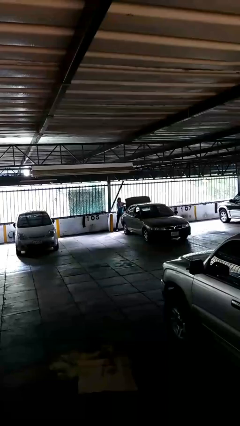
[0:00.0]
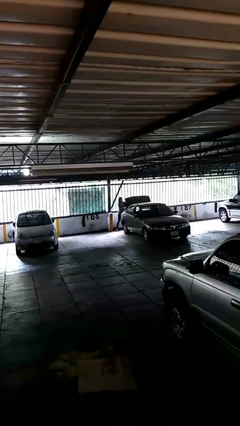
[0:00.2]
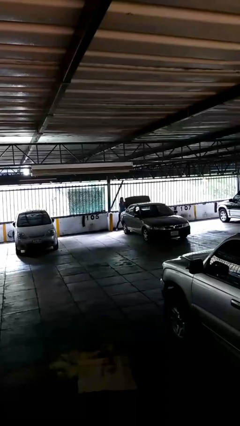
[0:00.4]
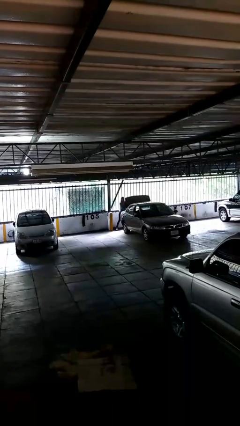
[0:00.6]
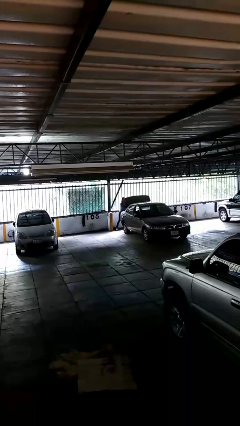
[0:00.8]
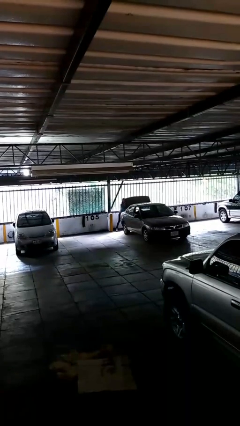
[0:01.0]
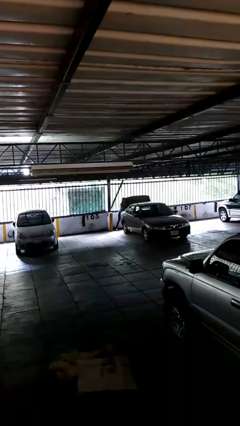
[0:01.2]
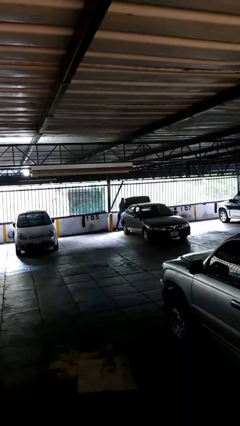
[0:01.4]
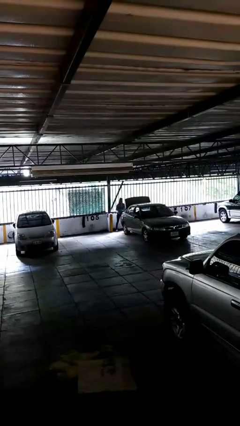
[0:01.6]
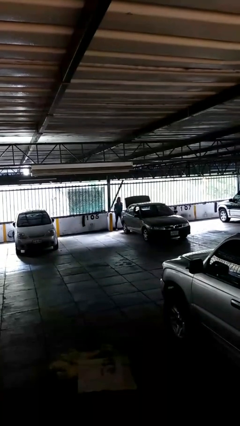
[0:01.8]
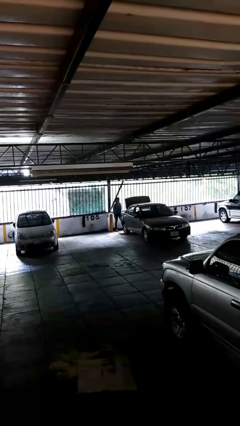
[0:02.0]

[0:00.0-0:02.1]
person loads car

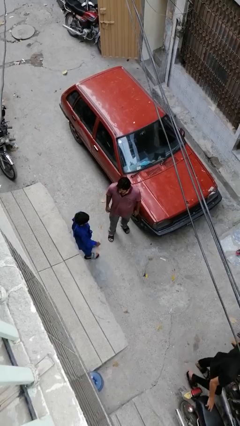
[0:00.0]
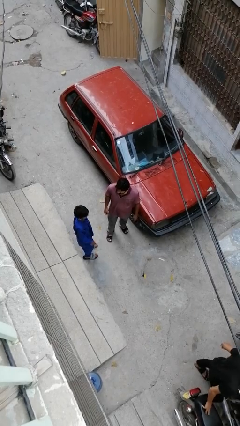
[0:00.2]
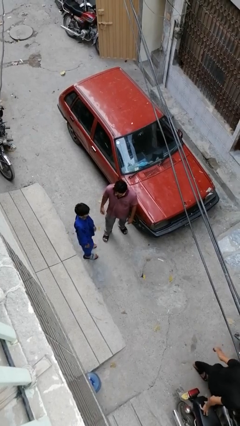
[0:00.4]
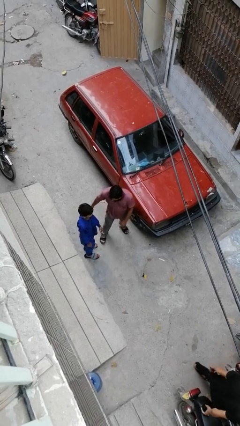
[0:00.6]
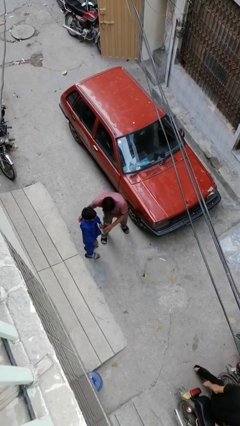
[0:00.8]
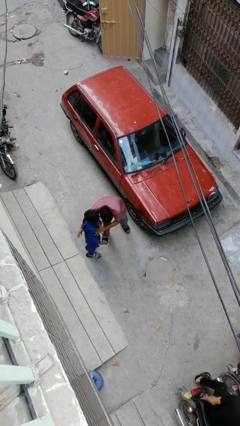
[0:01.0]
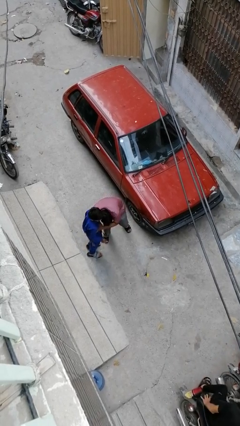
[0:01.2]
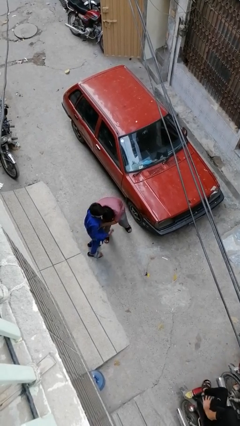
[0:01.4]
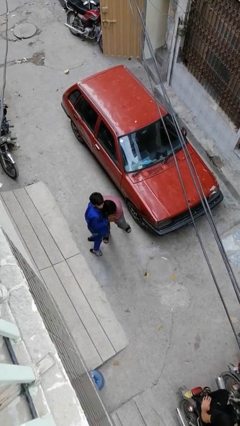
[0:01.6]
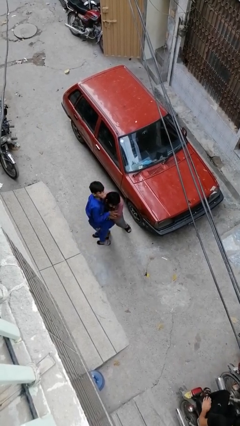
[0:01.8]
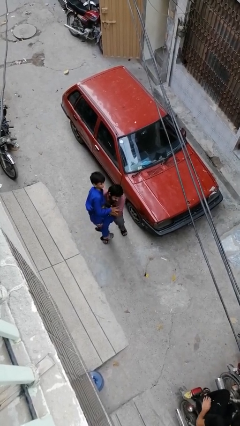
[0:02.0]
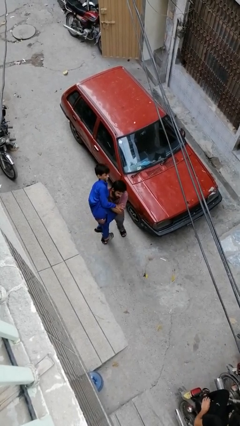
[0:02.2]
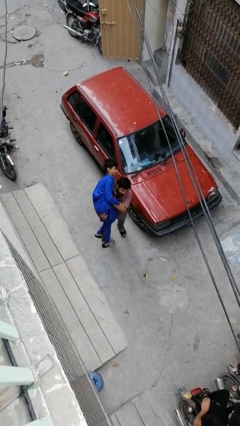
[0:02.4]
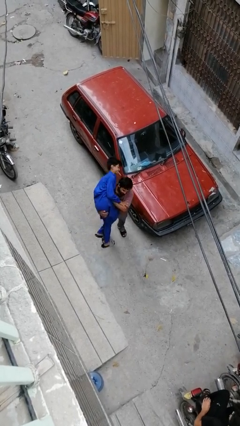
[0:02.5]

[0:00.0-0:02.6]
person picks up person

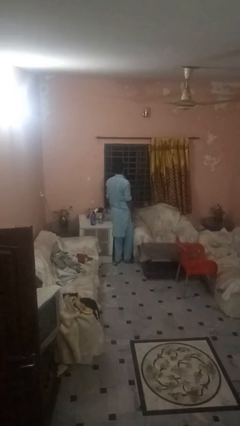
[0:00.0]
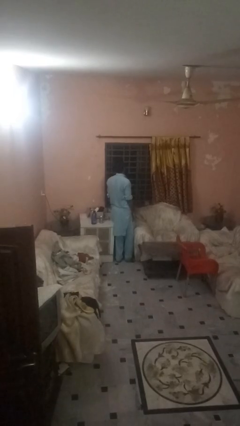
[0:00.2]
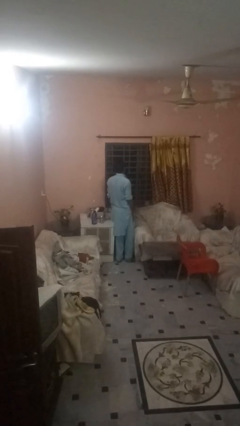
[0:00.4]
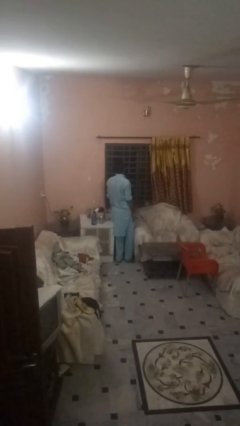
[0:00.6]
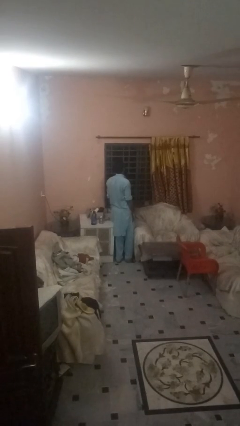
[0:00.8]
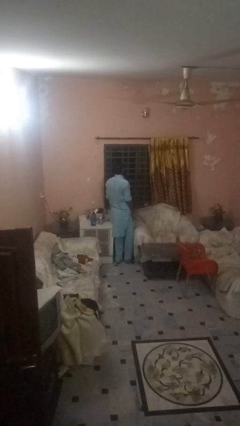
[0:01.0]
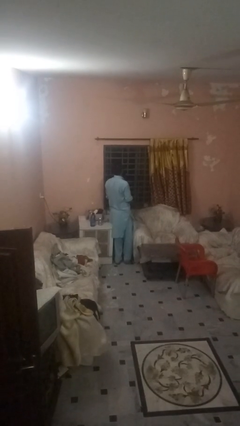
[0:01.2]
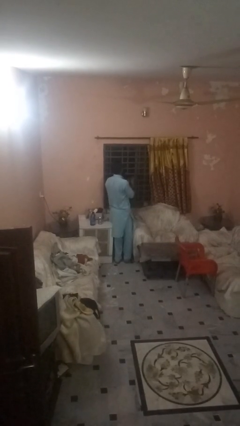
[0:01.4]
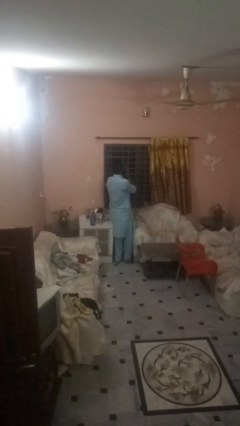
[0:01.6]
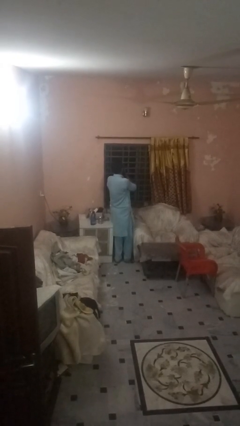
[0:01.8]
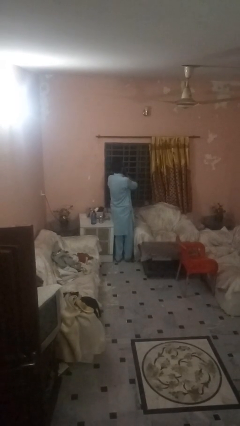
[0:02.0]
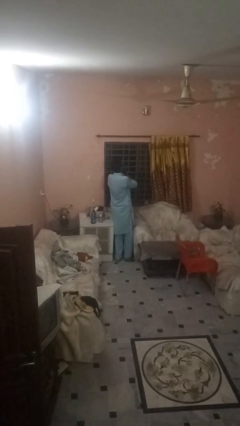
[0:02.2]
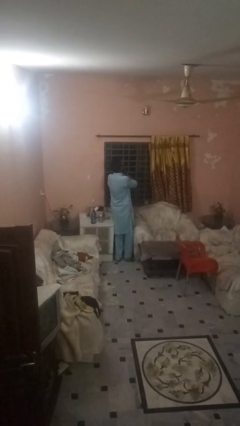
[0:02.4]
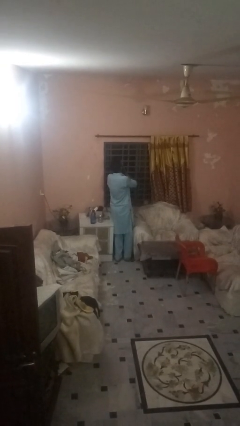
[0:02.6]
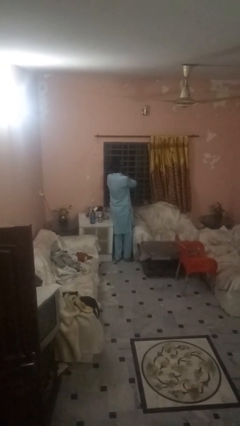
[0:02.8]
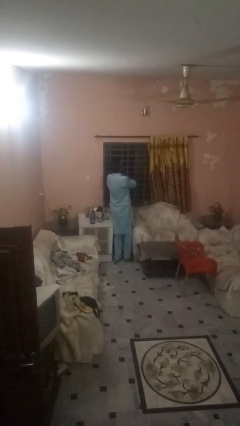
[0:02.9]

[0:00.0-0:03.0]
person covers face with hands

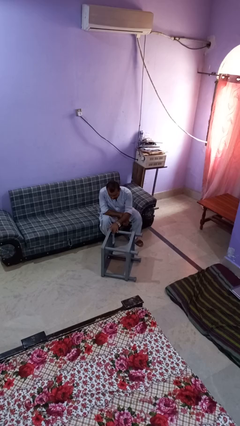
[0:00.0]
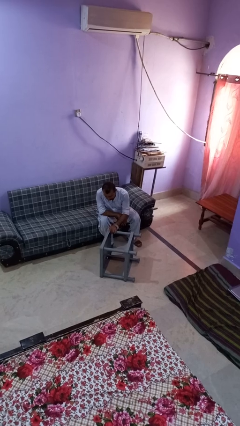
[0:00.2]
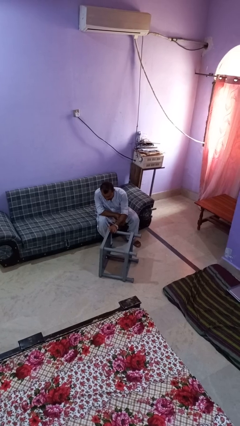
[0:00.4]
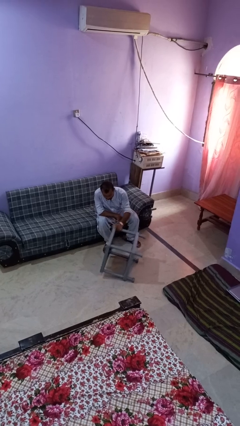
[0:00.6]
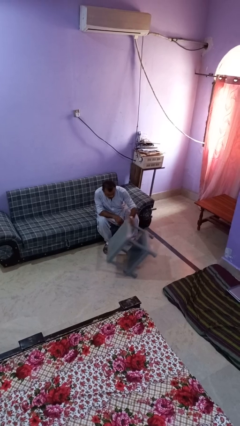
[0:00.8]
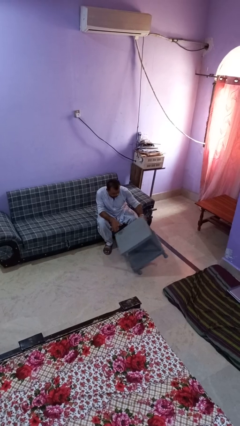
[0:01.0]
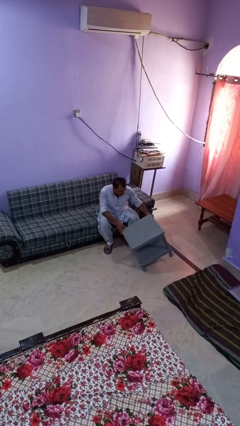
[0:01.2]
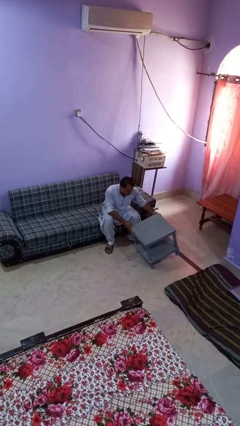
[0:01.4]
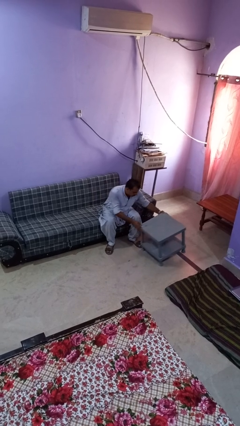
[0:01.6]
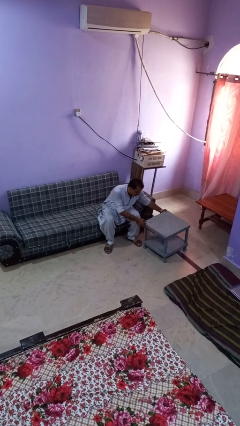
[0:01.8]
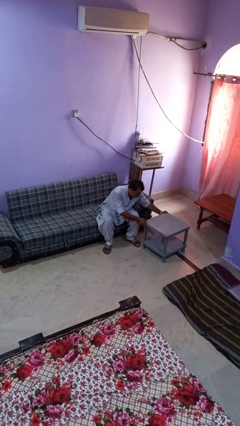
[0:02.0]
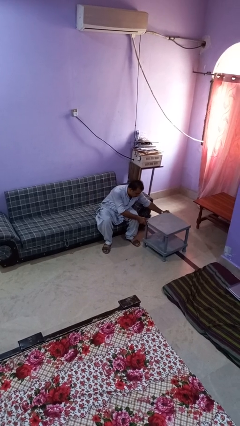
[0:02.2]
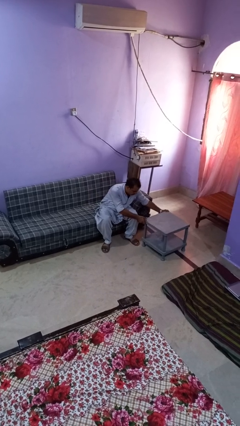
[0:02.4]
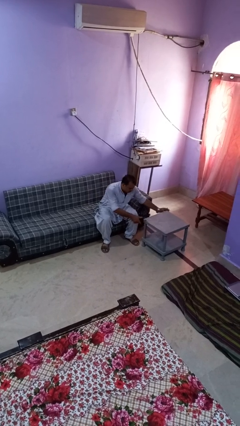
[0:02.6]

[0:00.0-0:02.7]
person sets upright furniture

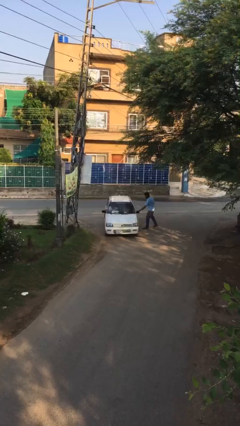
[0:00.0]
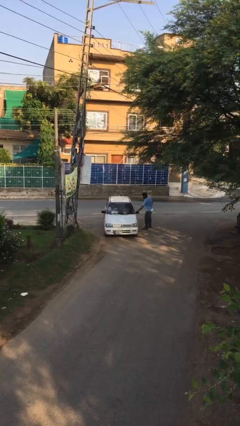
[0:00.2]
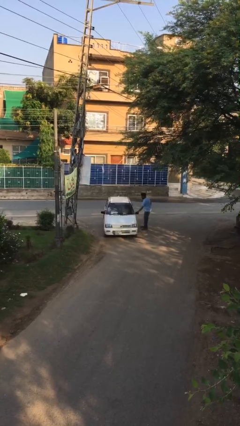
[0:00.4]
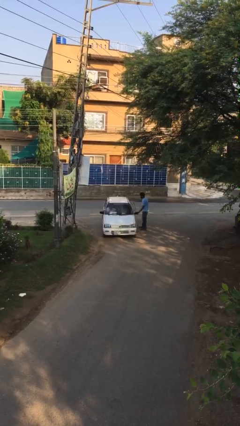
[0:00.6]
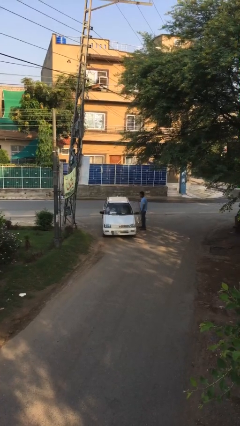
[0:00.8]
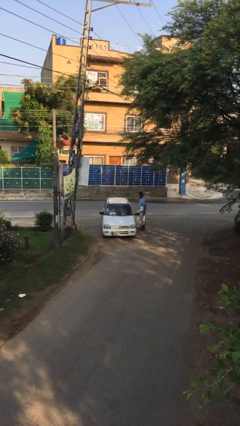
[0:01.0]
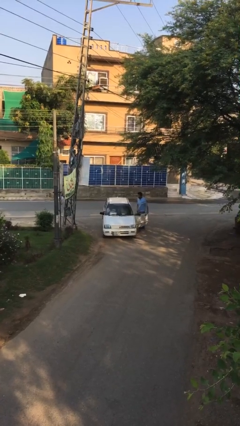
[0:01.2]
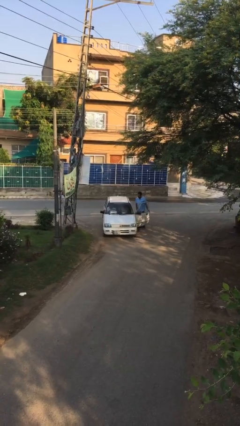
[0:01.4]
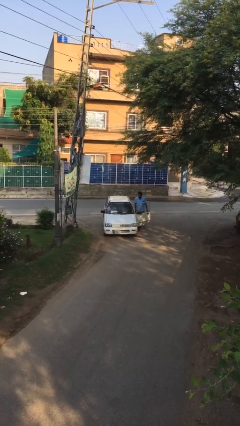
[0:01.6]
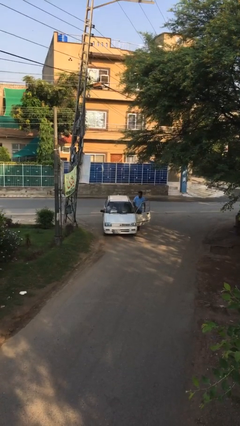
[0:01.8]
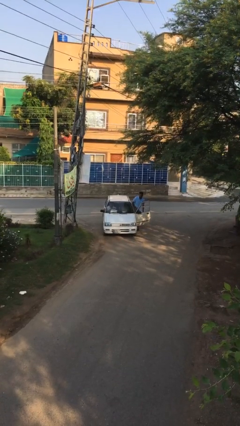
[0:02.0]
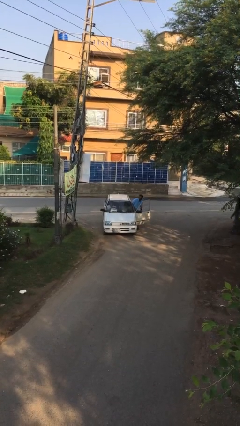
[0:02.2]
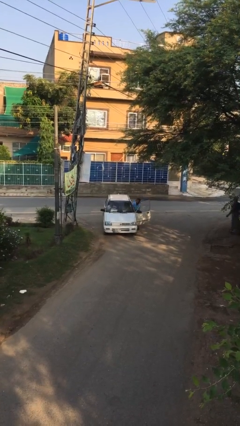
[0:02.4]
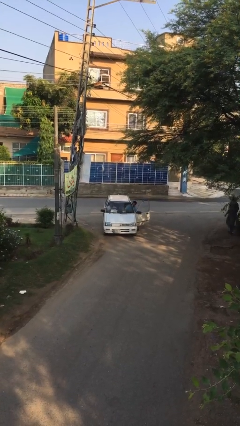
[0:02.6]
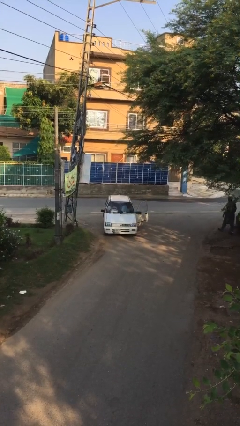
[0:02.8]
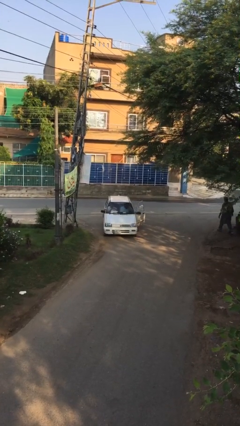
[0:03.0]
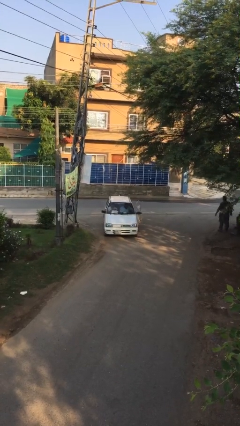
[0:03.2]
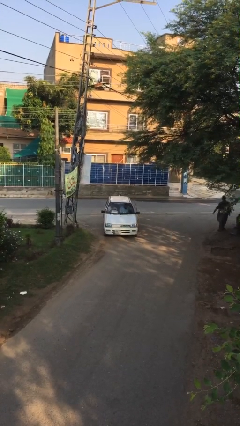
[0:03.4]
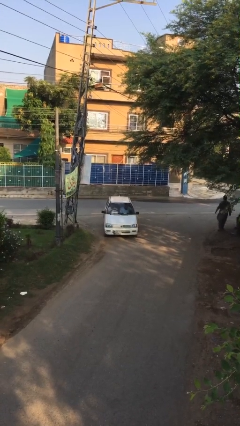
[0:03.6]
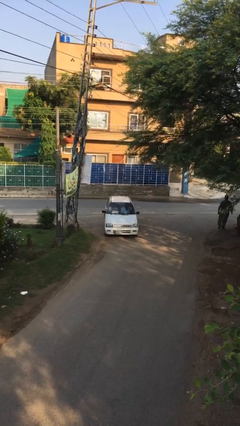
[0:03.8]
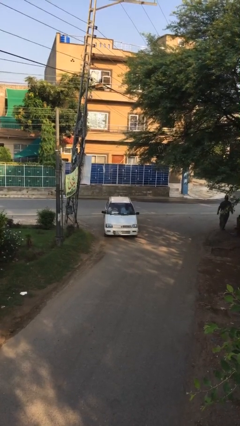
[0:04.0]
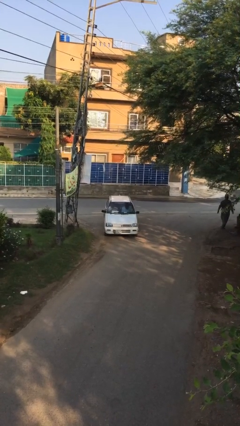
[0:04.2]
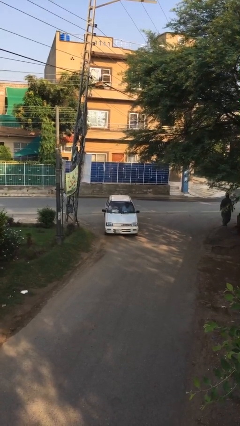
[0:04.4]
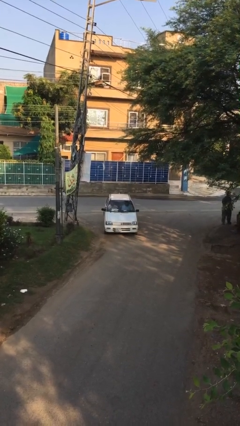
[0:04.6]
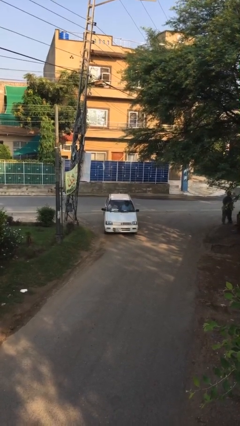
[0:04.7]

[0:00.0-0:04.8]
car picks up person

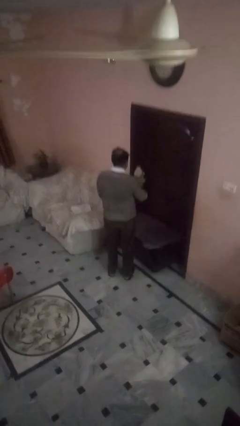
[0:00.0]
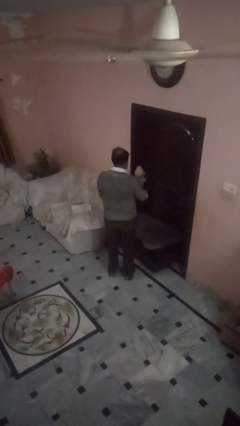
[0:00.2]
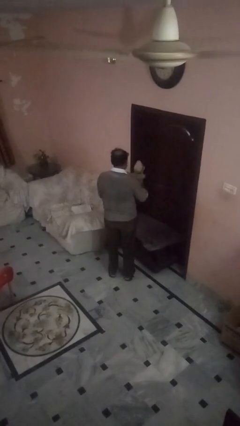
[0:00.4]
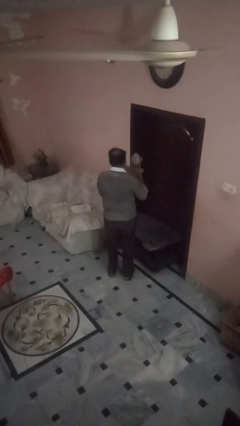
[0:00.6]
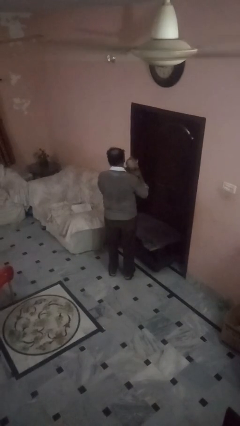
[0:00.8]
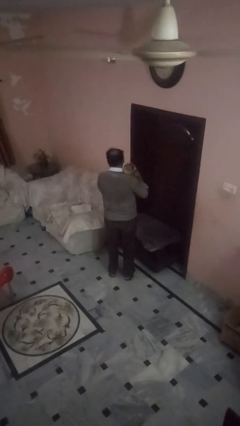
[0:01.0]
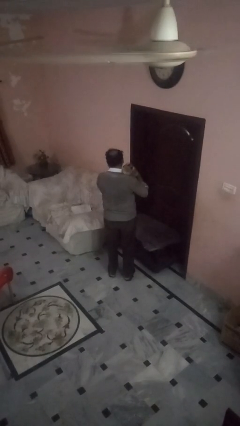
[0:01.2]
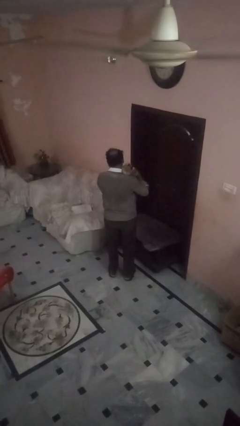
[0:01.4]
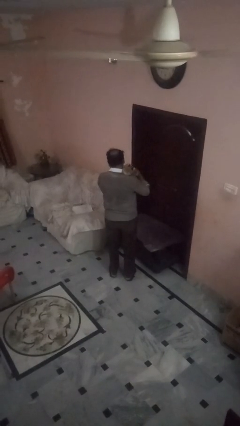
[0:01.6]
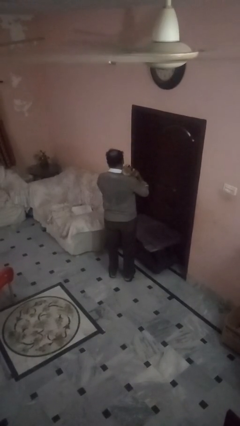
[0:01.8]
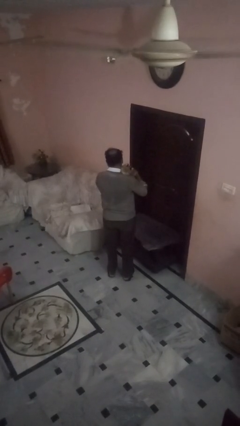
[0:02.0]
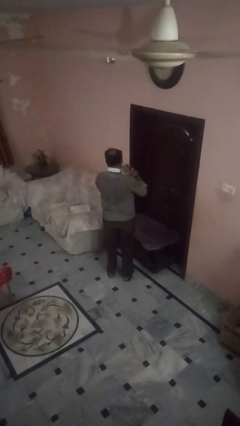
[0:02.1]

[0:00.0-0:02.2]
person hugs stuffed animal

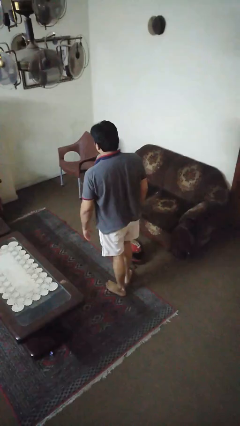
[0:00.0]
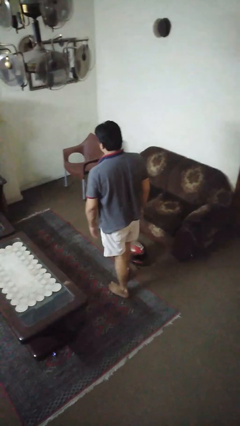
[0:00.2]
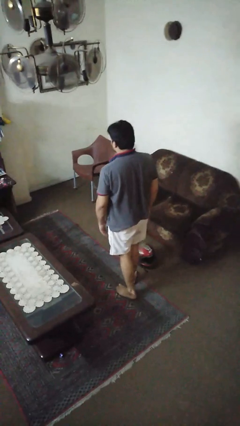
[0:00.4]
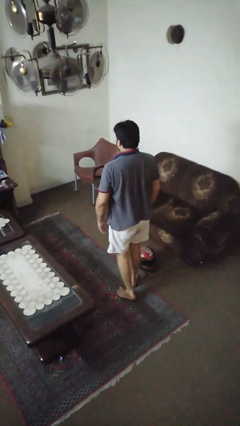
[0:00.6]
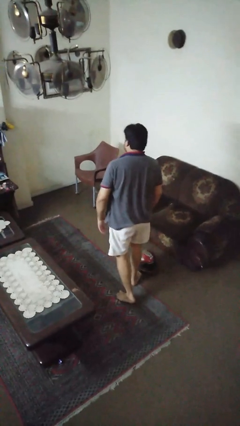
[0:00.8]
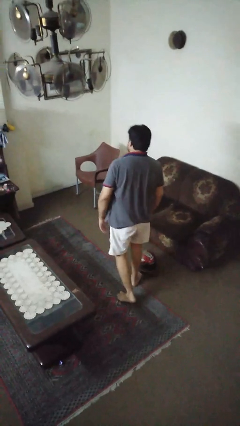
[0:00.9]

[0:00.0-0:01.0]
person trips on object on floor
